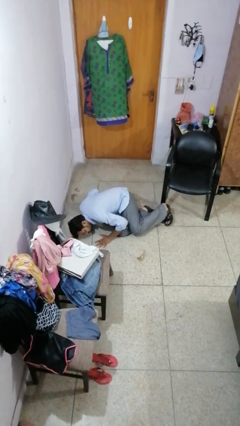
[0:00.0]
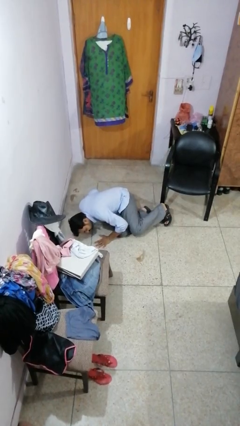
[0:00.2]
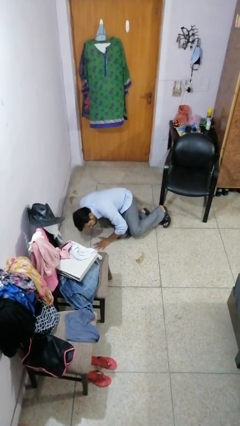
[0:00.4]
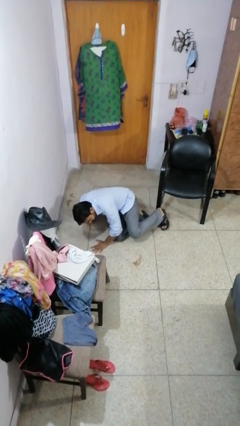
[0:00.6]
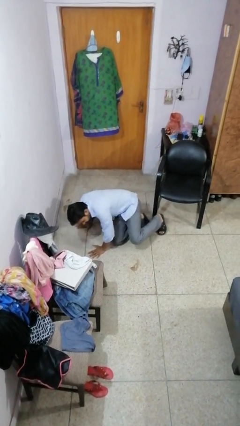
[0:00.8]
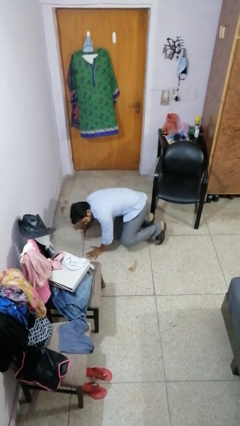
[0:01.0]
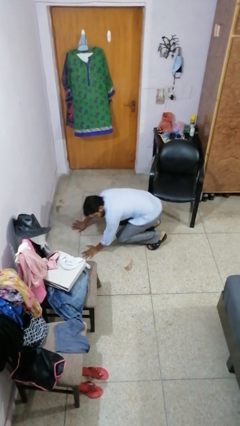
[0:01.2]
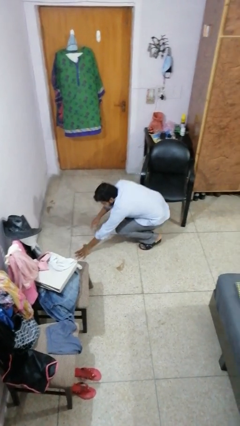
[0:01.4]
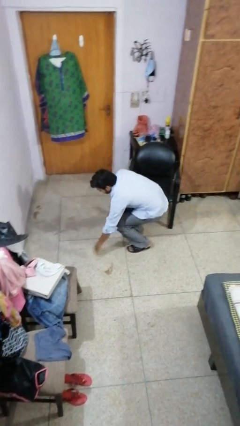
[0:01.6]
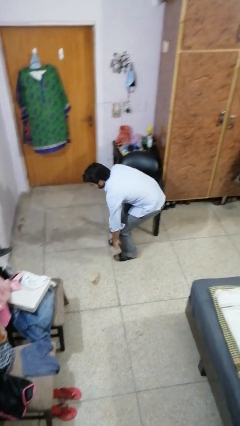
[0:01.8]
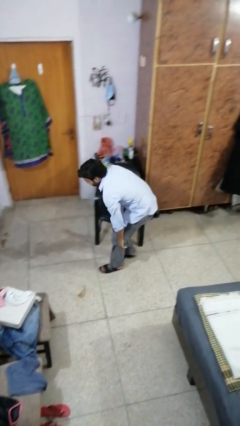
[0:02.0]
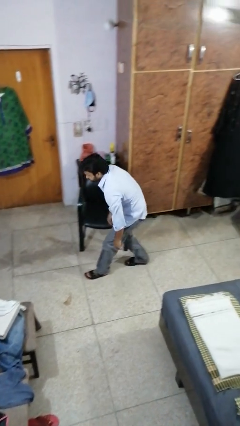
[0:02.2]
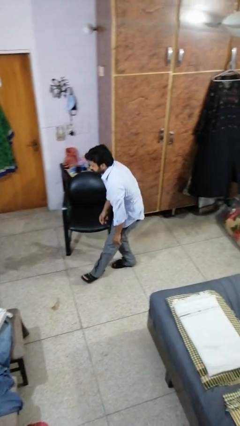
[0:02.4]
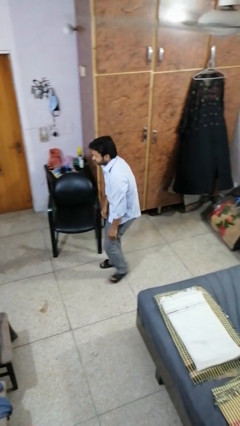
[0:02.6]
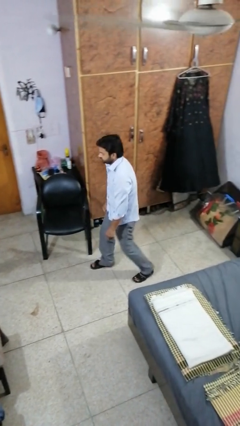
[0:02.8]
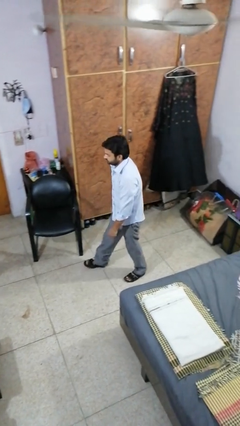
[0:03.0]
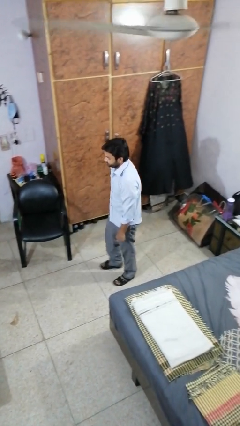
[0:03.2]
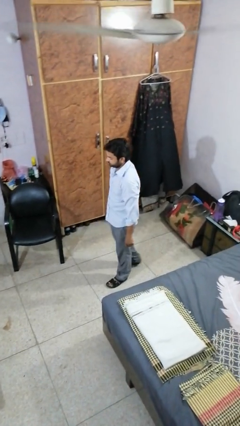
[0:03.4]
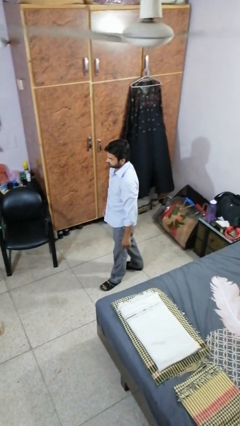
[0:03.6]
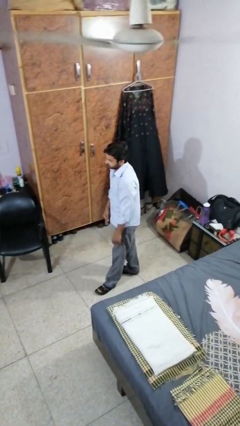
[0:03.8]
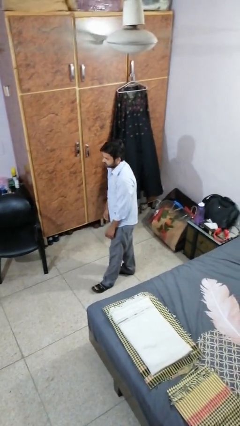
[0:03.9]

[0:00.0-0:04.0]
person stands up from floor

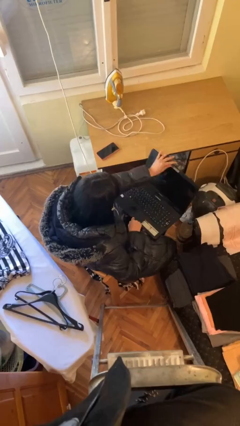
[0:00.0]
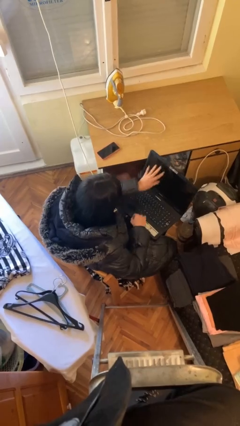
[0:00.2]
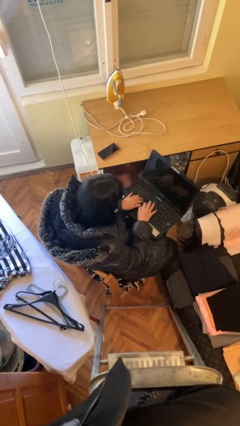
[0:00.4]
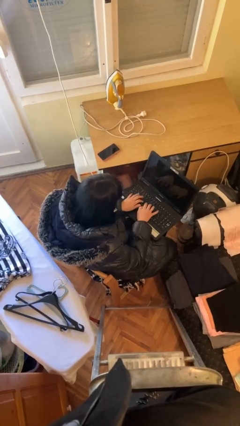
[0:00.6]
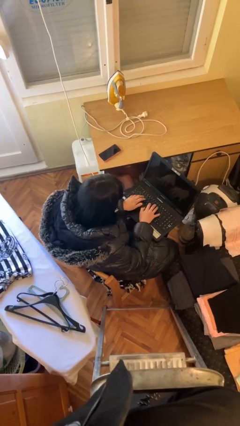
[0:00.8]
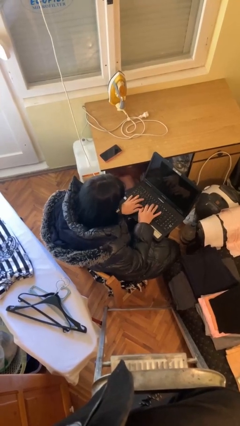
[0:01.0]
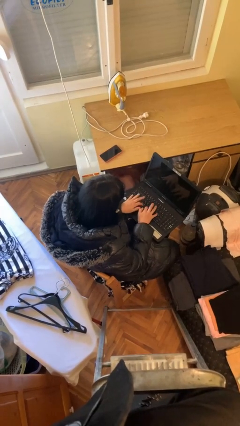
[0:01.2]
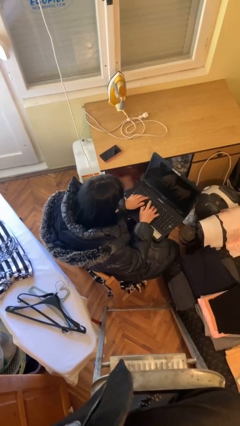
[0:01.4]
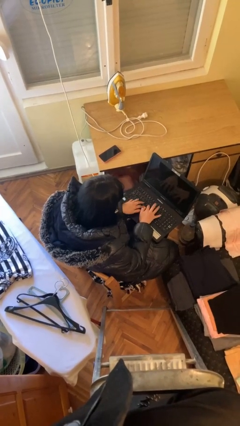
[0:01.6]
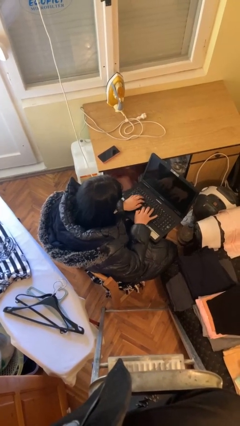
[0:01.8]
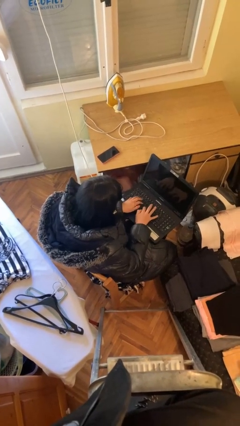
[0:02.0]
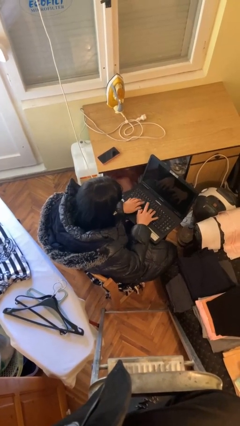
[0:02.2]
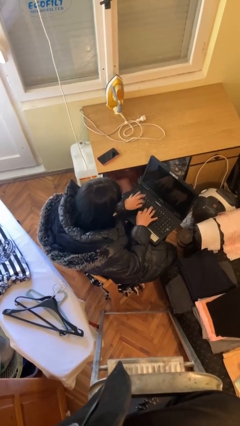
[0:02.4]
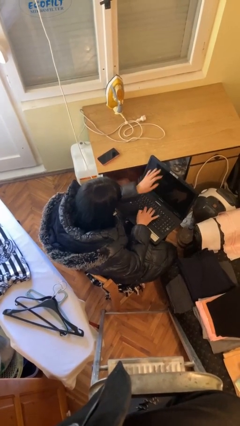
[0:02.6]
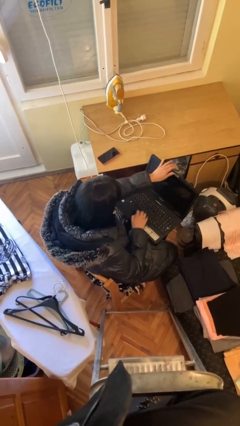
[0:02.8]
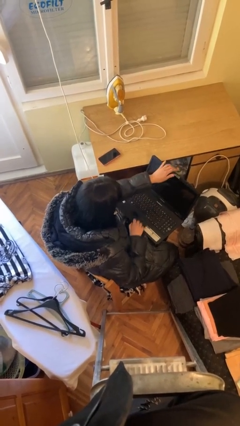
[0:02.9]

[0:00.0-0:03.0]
person interacts with laptop

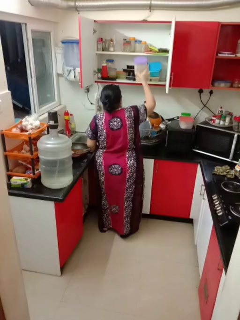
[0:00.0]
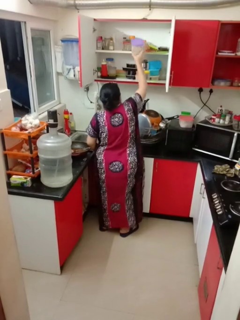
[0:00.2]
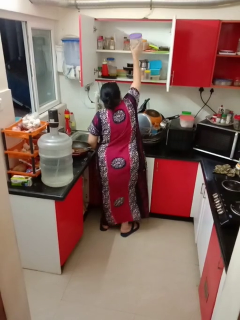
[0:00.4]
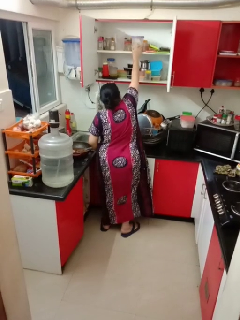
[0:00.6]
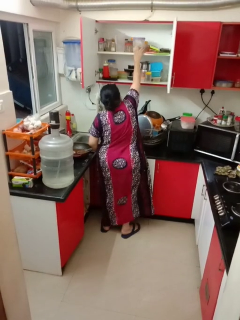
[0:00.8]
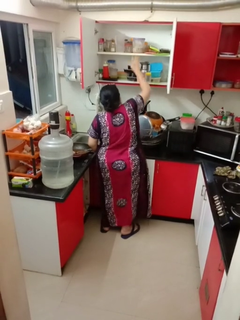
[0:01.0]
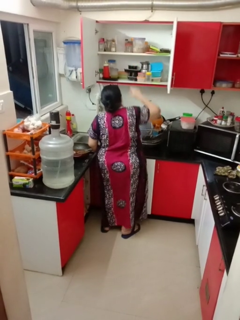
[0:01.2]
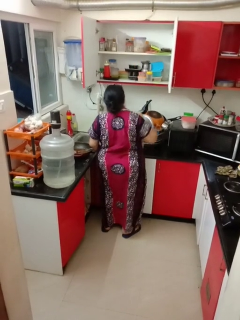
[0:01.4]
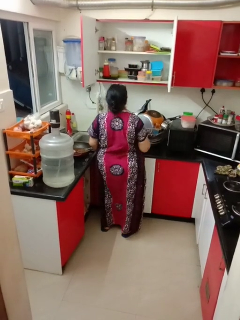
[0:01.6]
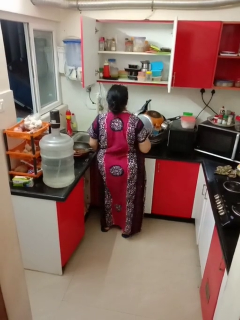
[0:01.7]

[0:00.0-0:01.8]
person puts object in cabinet

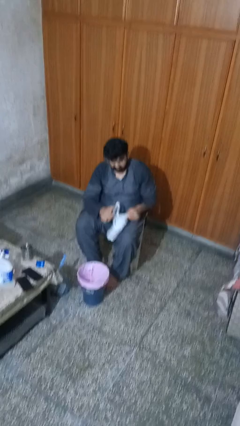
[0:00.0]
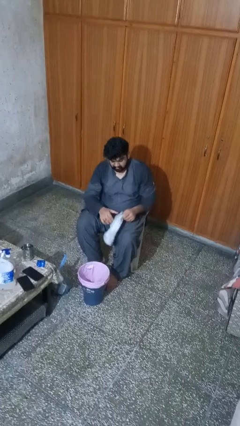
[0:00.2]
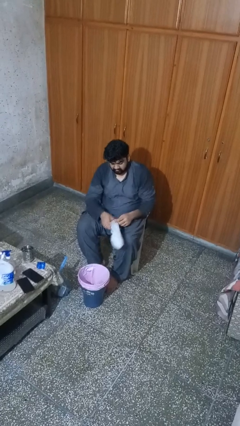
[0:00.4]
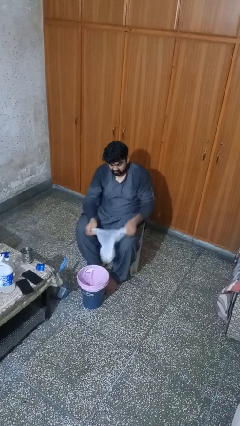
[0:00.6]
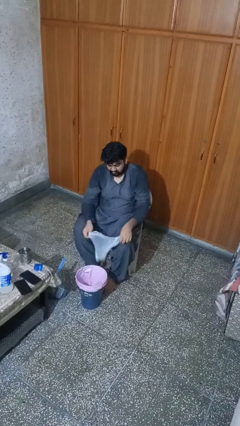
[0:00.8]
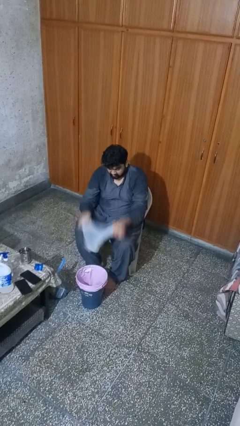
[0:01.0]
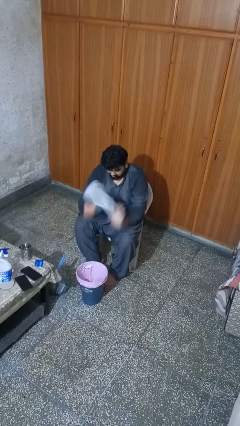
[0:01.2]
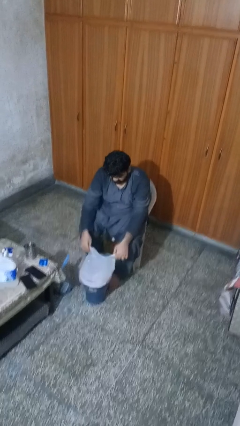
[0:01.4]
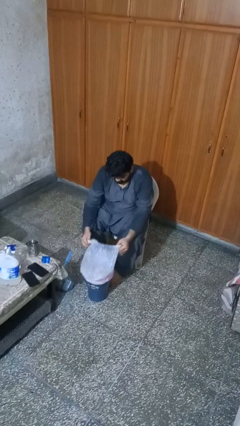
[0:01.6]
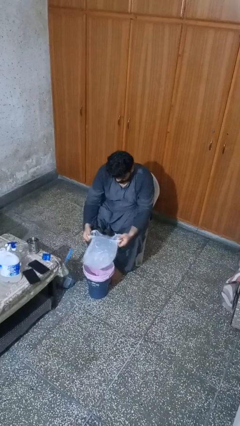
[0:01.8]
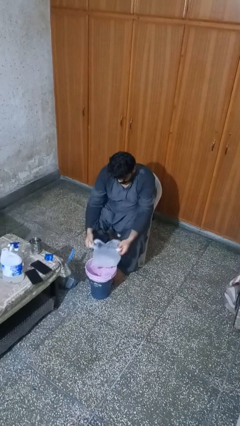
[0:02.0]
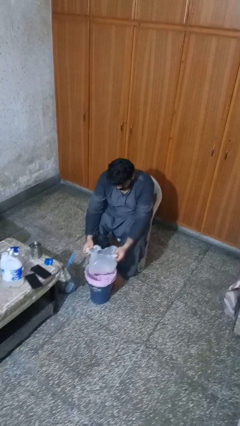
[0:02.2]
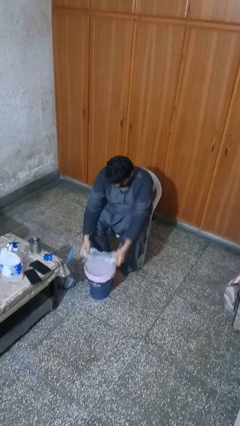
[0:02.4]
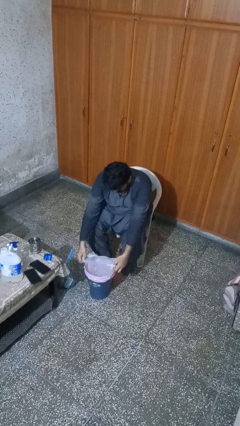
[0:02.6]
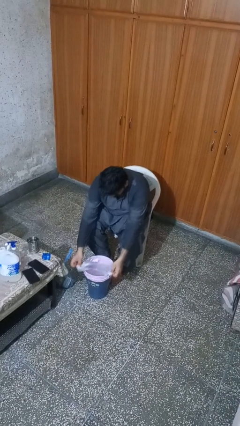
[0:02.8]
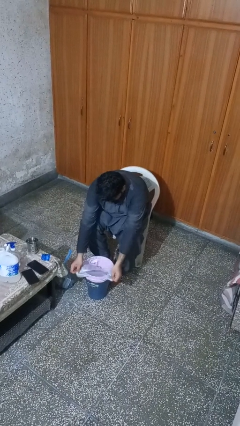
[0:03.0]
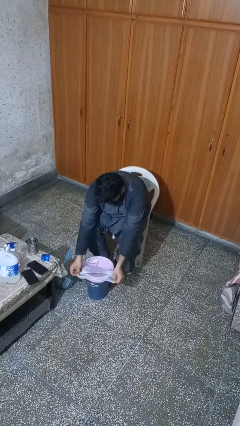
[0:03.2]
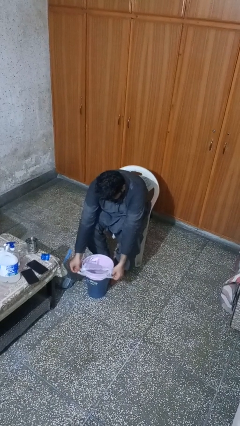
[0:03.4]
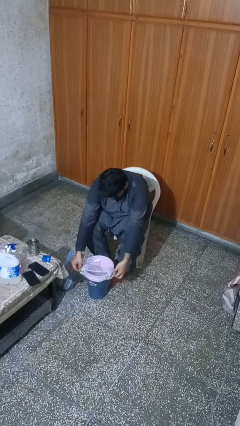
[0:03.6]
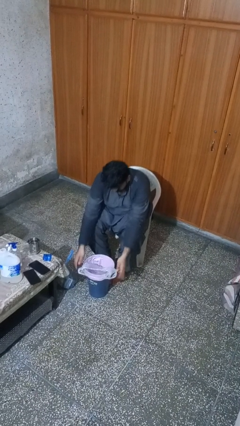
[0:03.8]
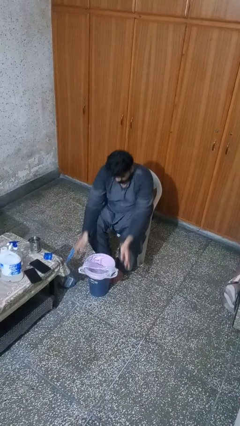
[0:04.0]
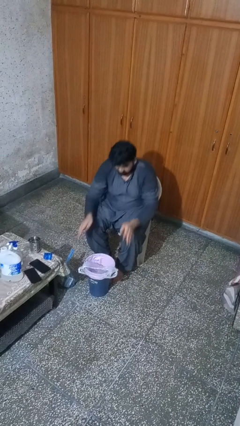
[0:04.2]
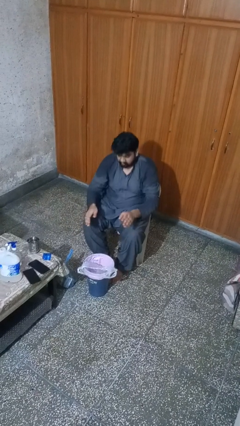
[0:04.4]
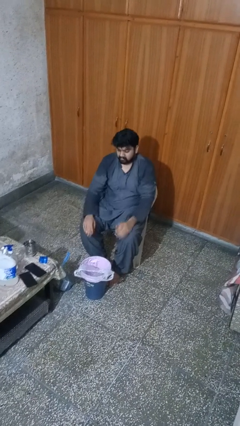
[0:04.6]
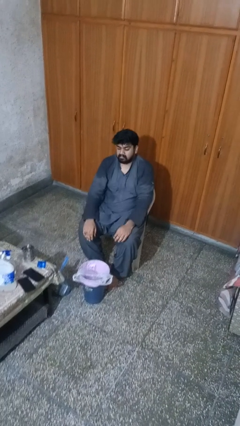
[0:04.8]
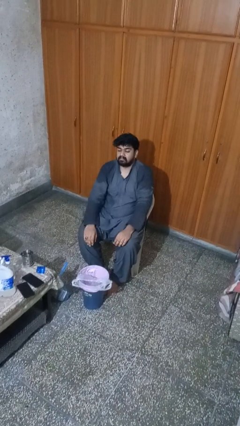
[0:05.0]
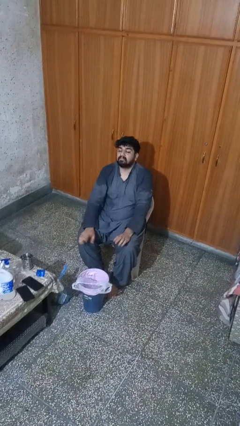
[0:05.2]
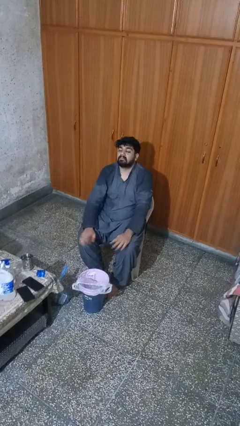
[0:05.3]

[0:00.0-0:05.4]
person inserts trashbag into trashcan

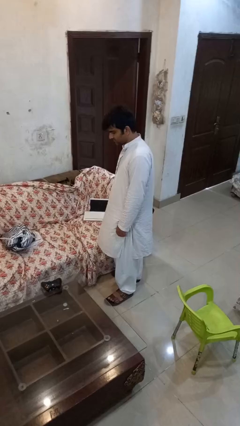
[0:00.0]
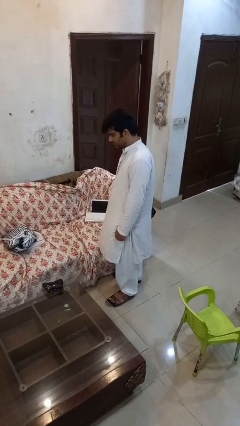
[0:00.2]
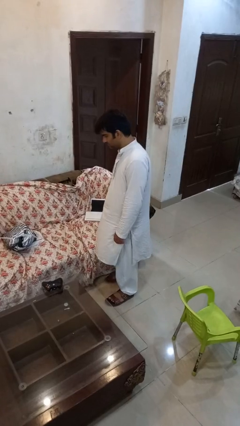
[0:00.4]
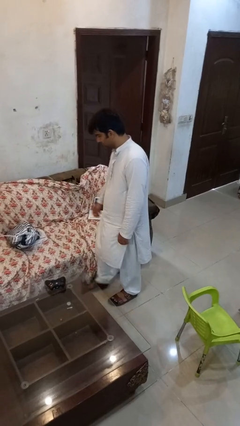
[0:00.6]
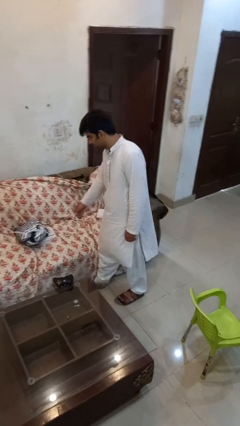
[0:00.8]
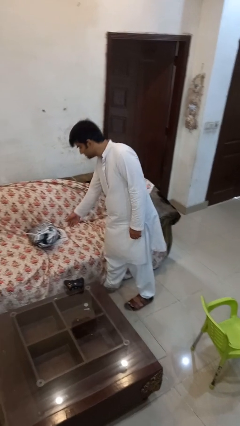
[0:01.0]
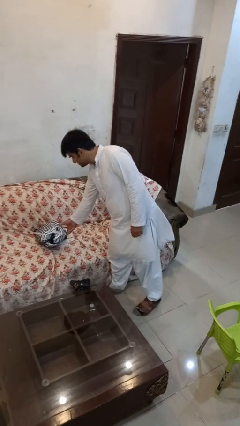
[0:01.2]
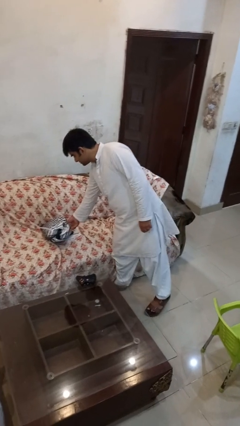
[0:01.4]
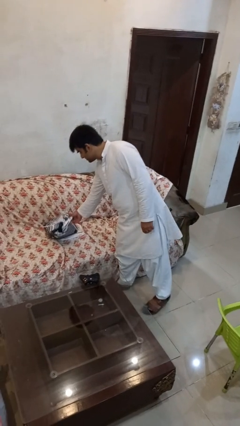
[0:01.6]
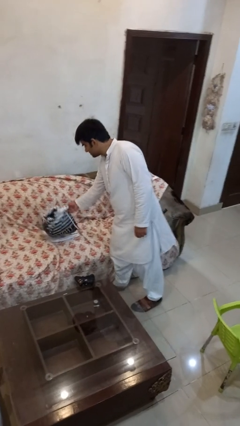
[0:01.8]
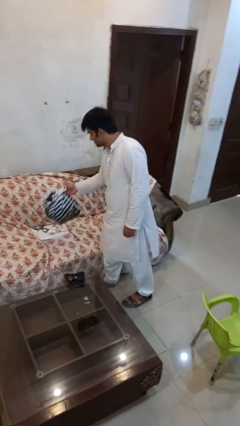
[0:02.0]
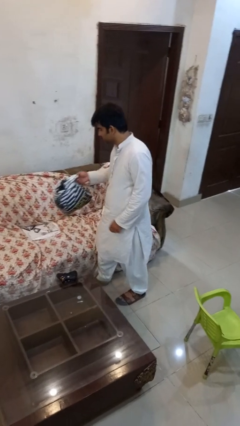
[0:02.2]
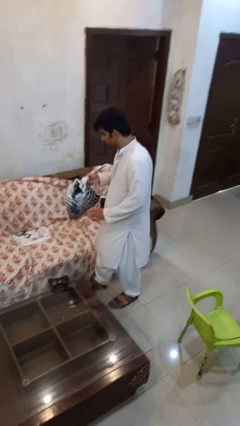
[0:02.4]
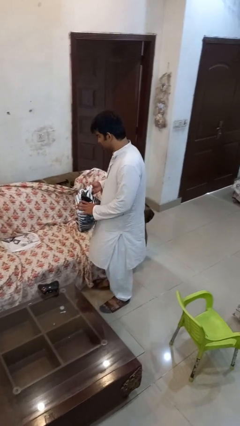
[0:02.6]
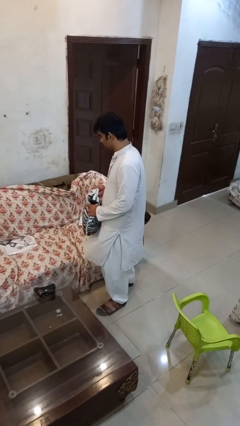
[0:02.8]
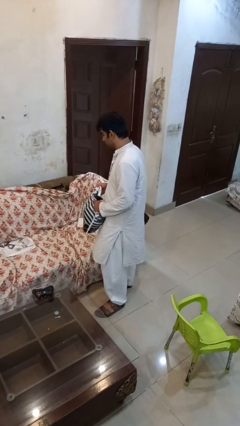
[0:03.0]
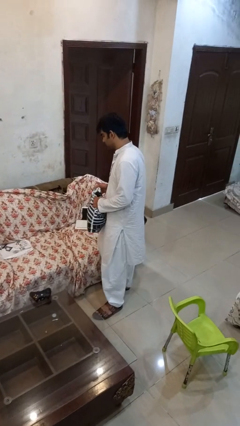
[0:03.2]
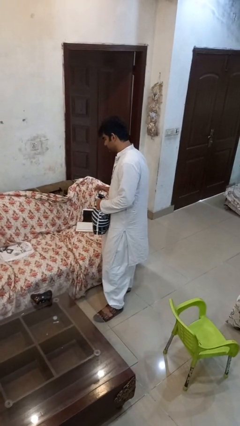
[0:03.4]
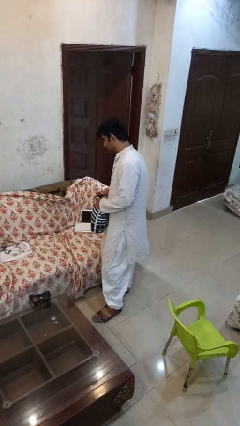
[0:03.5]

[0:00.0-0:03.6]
person picks up object from couch
